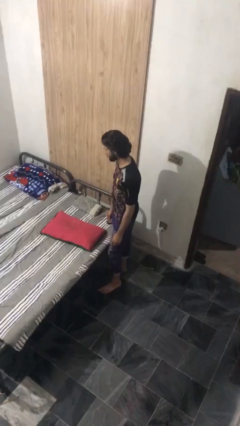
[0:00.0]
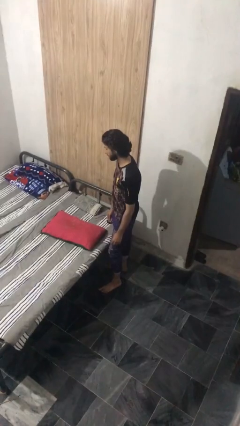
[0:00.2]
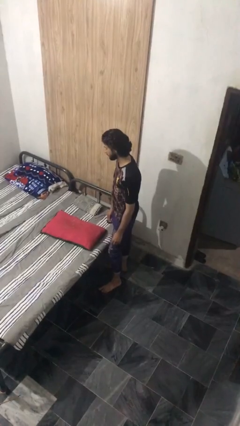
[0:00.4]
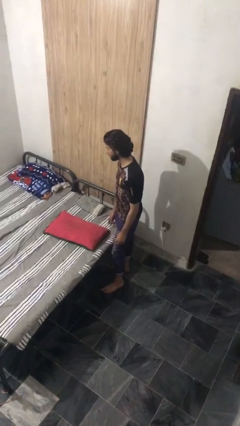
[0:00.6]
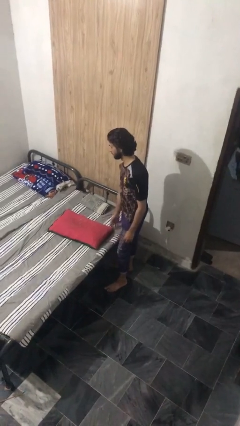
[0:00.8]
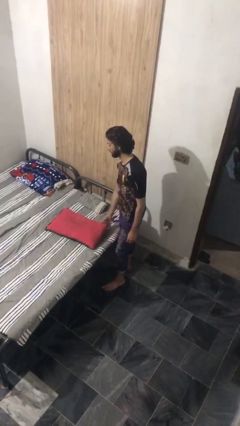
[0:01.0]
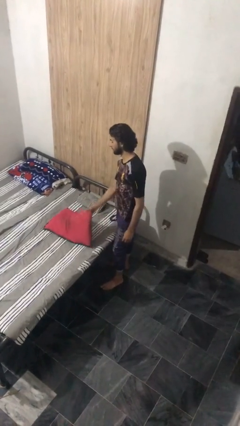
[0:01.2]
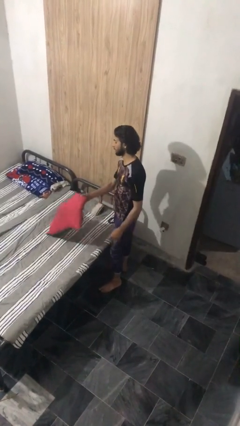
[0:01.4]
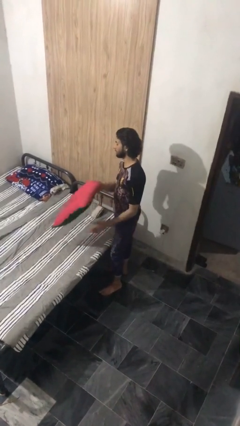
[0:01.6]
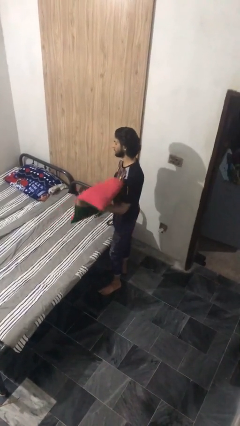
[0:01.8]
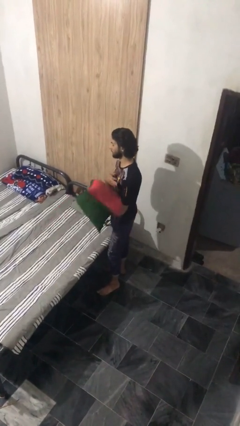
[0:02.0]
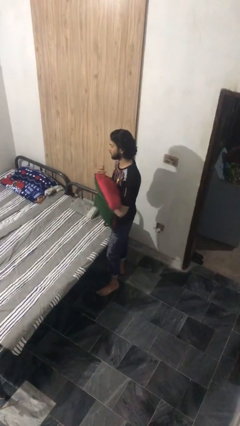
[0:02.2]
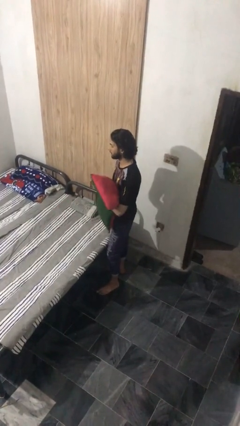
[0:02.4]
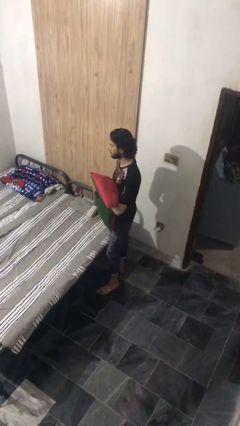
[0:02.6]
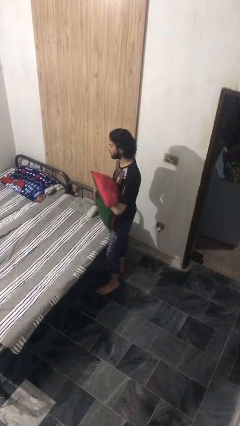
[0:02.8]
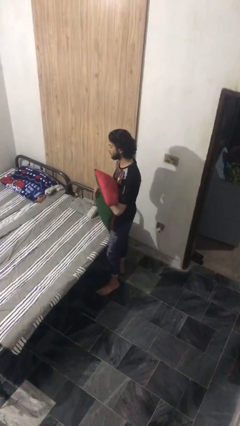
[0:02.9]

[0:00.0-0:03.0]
person picks up object from bed

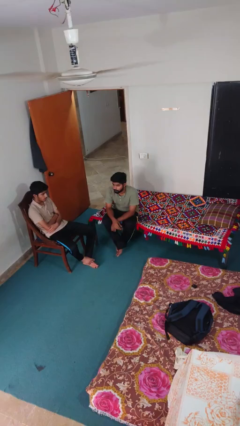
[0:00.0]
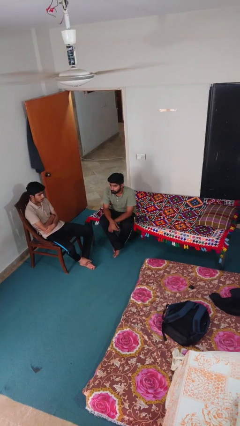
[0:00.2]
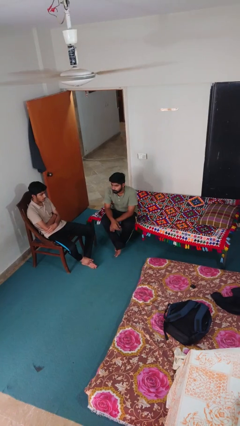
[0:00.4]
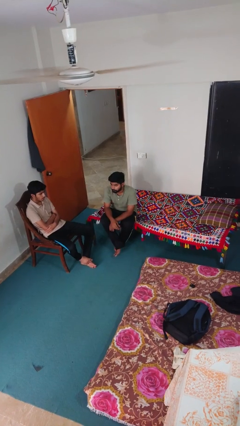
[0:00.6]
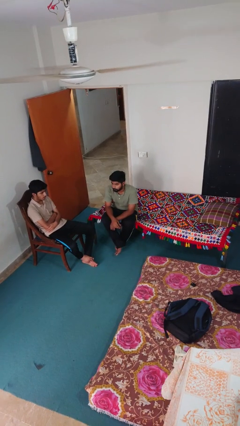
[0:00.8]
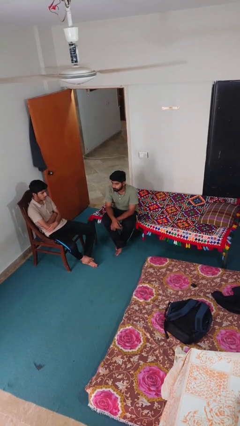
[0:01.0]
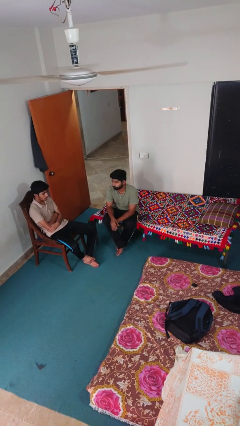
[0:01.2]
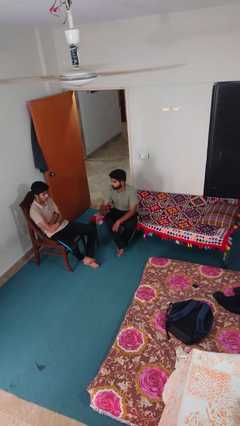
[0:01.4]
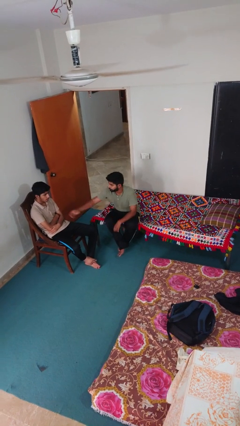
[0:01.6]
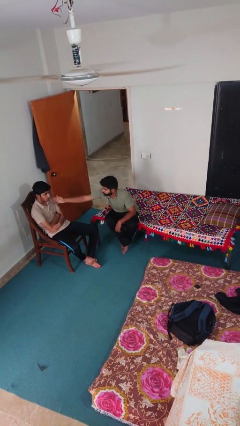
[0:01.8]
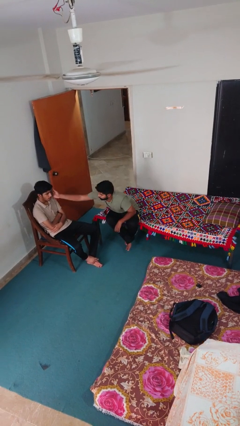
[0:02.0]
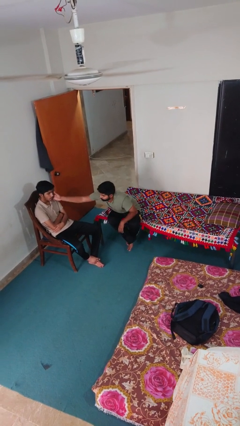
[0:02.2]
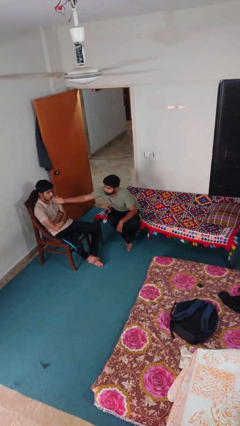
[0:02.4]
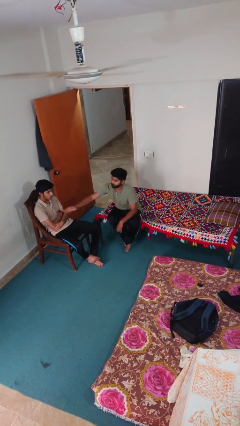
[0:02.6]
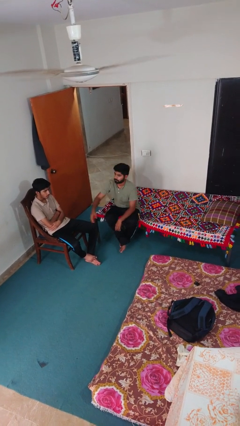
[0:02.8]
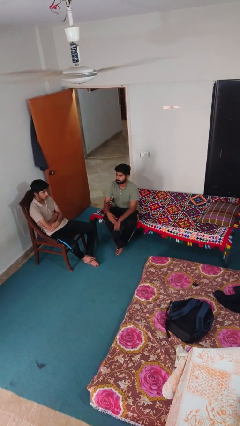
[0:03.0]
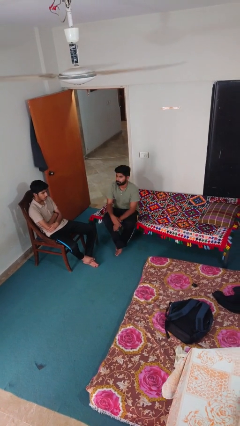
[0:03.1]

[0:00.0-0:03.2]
person touches face of person

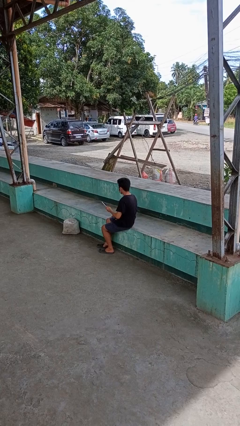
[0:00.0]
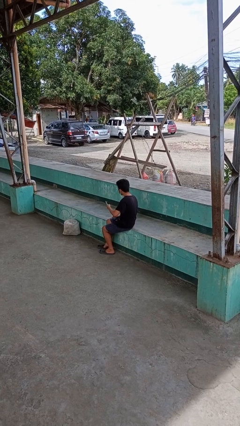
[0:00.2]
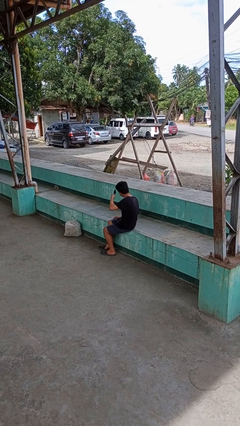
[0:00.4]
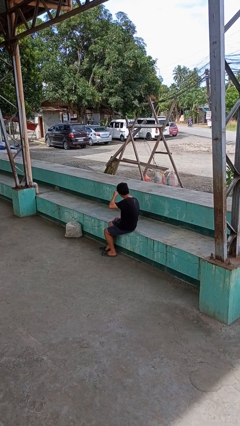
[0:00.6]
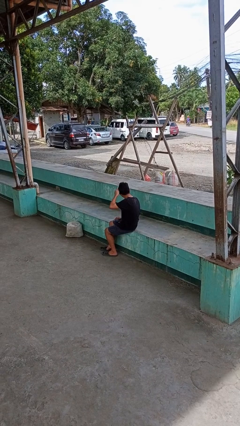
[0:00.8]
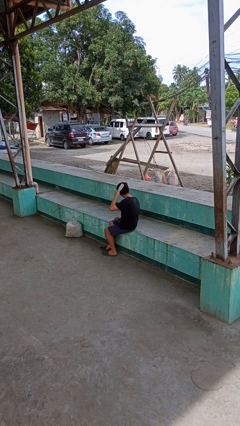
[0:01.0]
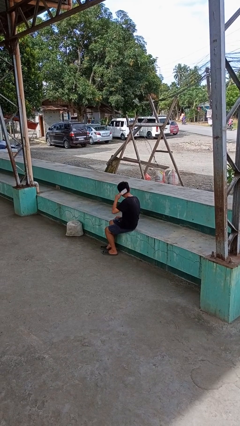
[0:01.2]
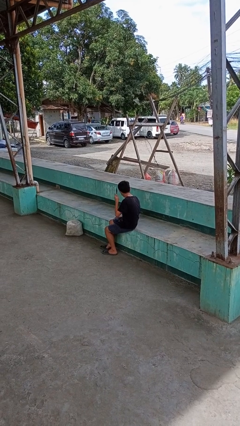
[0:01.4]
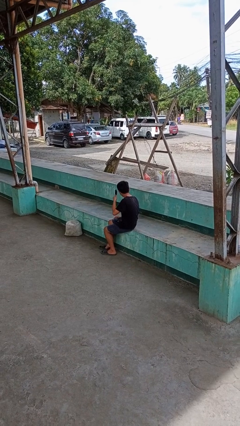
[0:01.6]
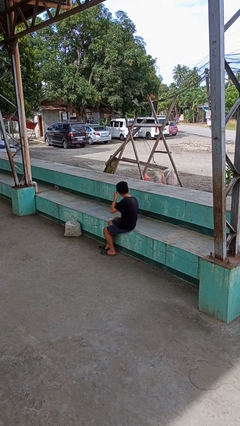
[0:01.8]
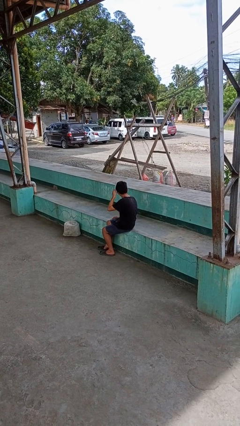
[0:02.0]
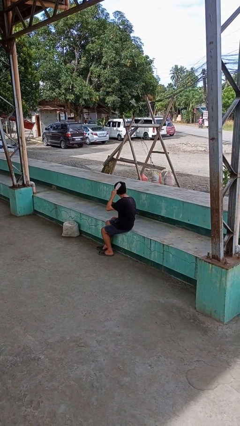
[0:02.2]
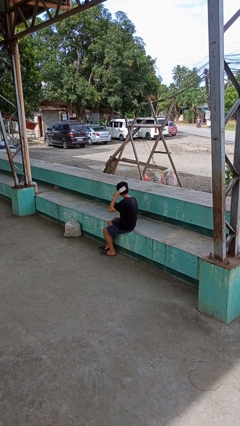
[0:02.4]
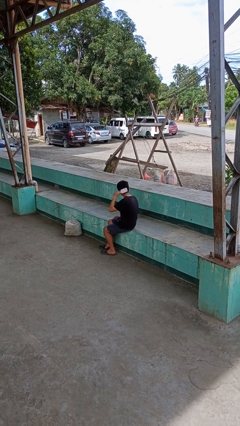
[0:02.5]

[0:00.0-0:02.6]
person brushes hair

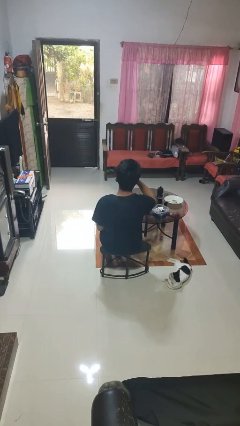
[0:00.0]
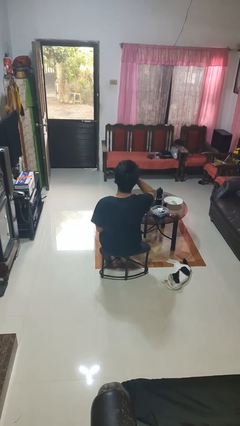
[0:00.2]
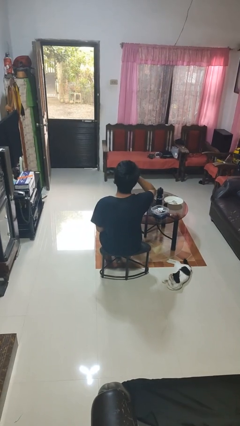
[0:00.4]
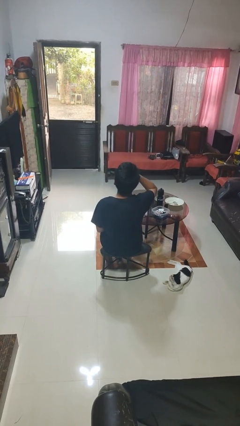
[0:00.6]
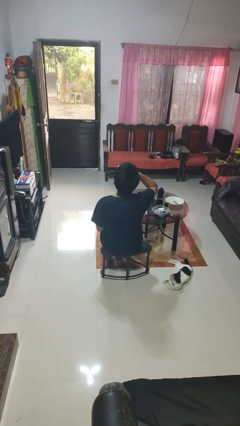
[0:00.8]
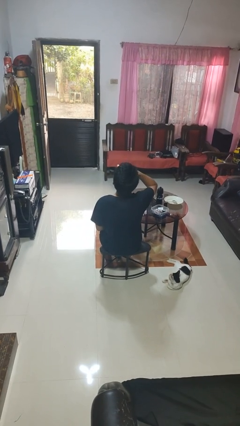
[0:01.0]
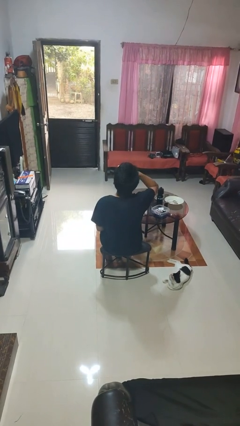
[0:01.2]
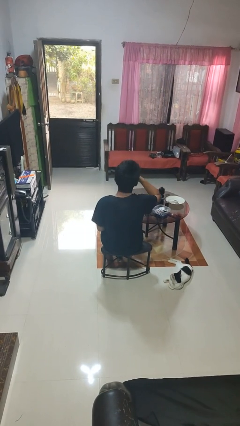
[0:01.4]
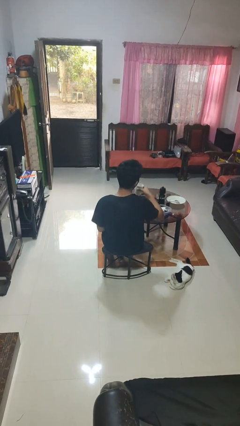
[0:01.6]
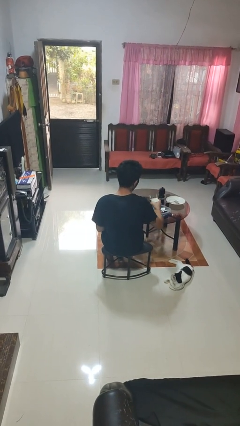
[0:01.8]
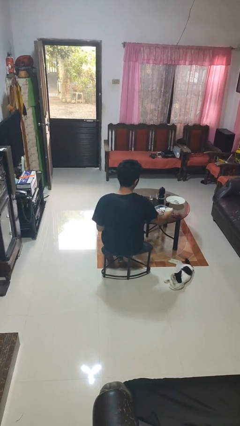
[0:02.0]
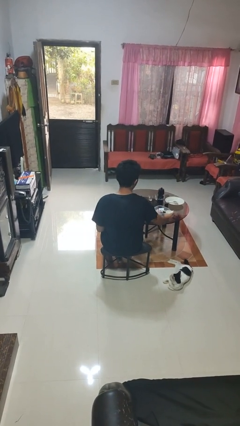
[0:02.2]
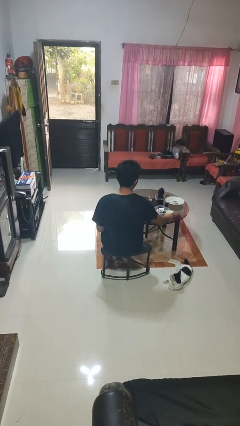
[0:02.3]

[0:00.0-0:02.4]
person drinks from cup

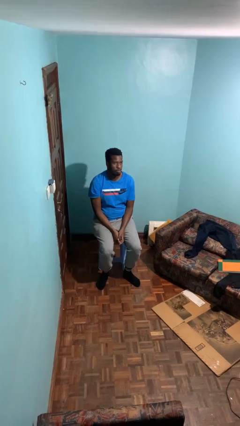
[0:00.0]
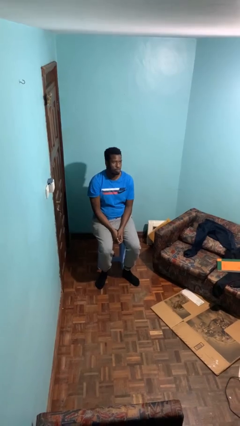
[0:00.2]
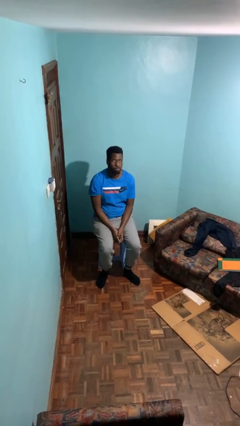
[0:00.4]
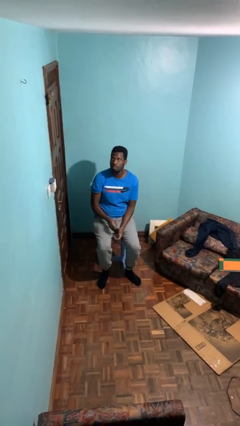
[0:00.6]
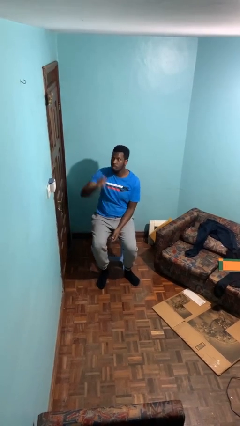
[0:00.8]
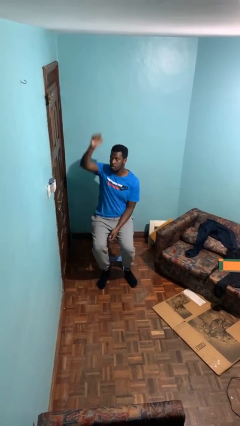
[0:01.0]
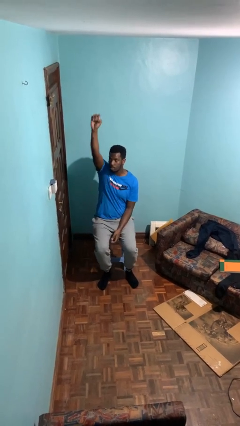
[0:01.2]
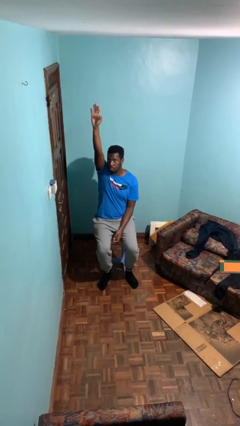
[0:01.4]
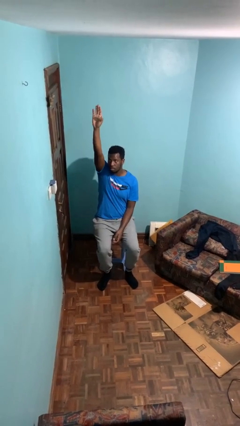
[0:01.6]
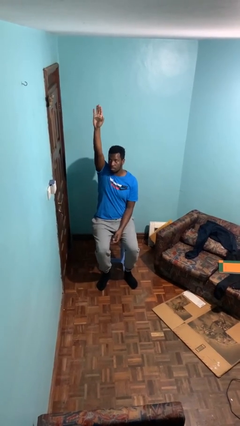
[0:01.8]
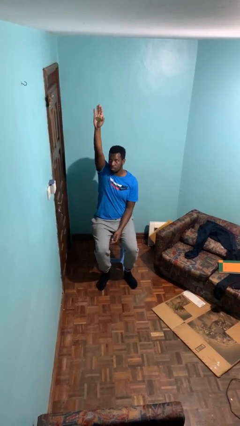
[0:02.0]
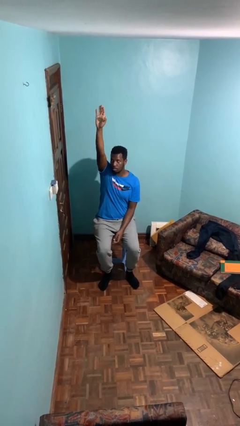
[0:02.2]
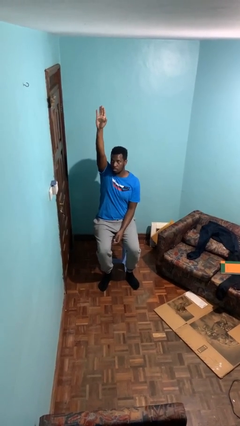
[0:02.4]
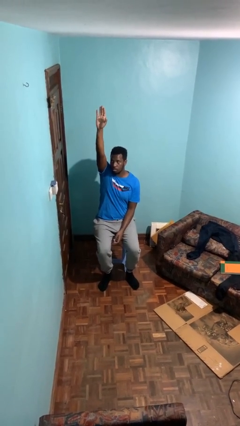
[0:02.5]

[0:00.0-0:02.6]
person gestures raise hand

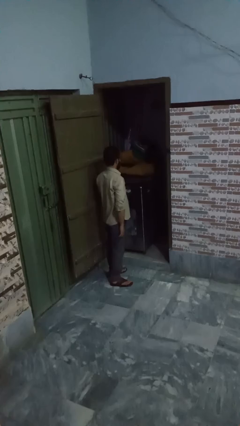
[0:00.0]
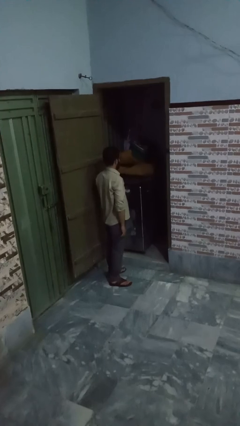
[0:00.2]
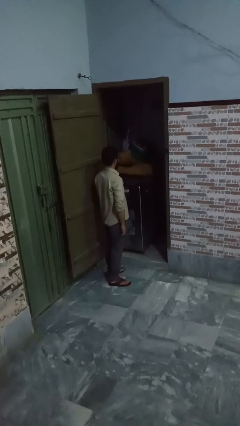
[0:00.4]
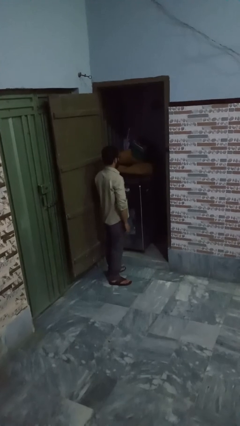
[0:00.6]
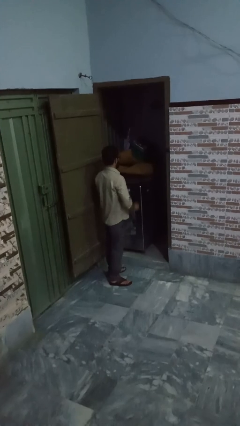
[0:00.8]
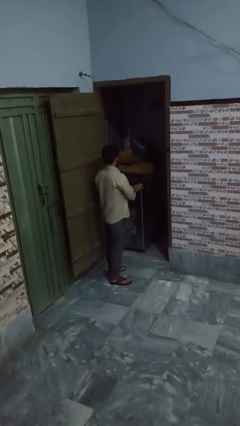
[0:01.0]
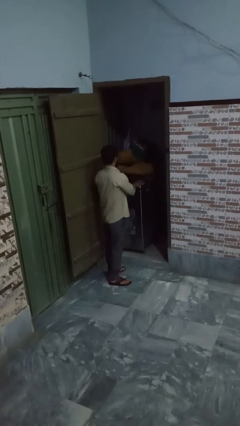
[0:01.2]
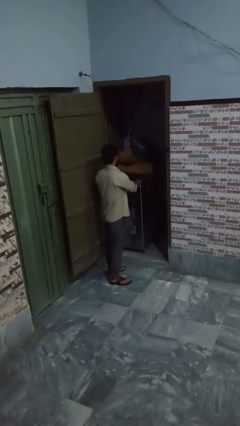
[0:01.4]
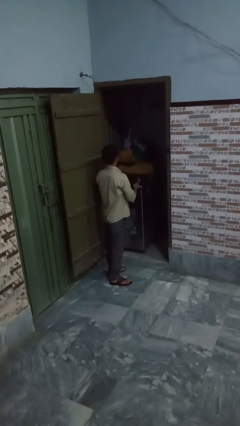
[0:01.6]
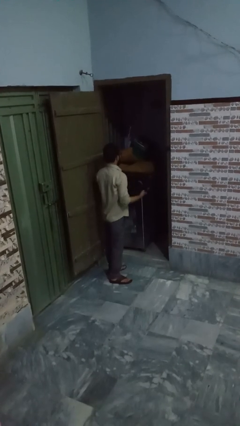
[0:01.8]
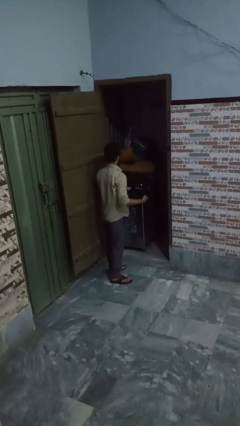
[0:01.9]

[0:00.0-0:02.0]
person unloads dryer

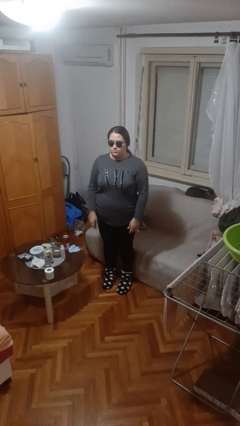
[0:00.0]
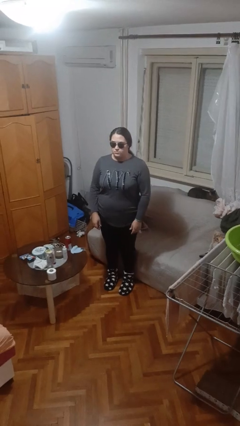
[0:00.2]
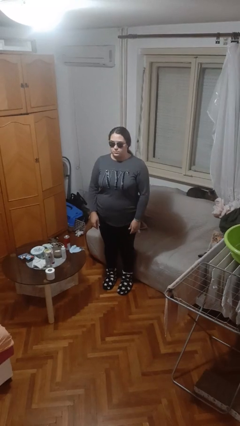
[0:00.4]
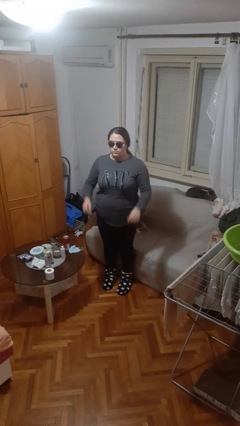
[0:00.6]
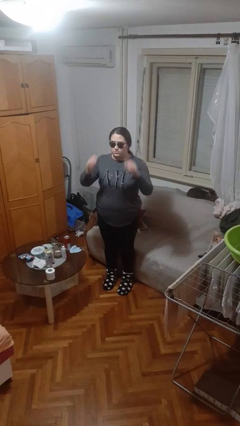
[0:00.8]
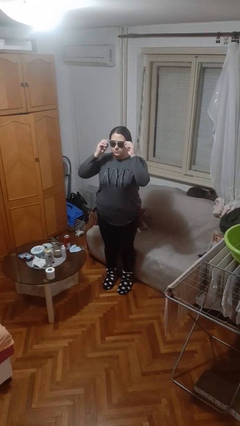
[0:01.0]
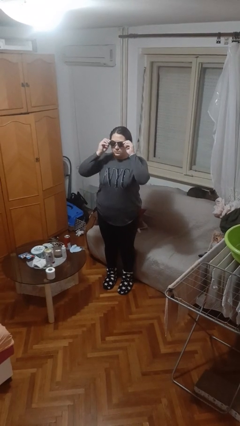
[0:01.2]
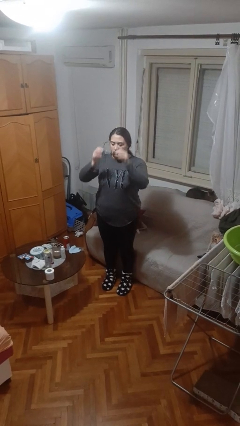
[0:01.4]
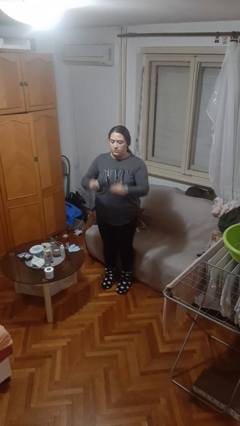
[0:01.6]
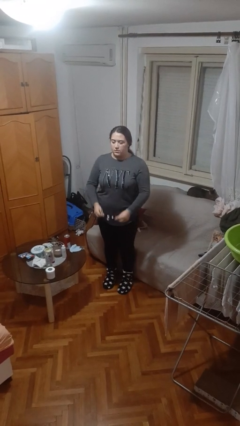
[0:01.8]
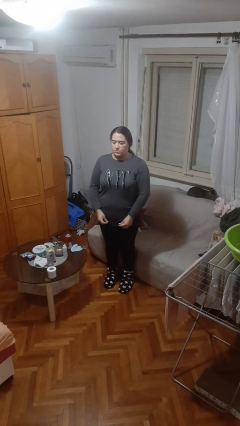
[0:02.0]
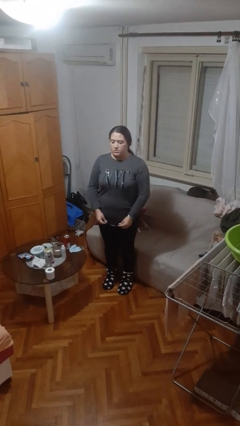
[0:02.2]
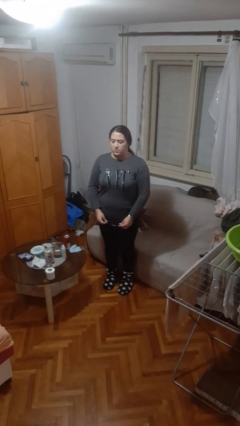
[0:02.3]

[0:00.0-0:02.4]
person takes off sunglasses
